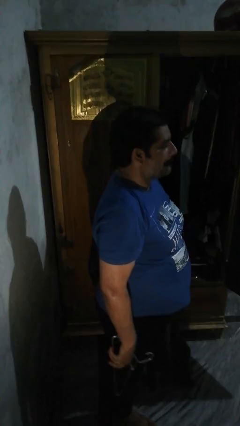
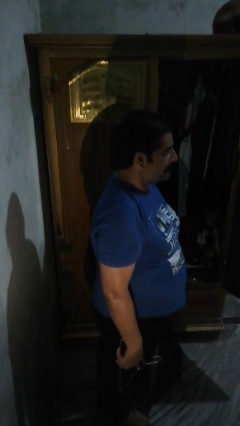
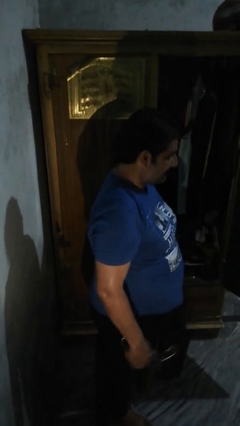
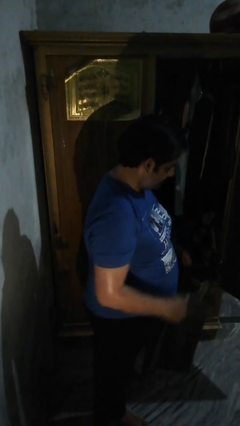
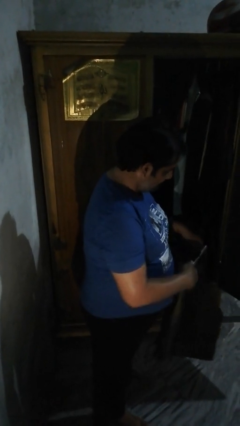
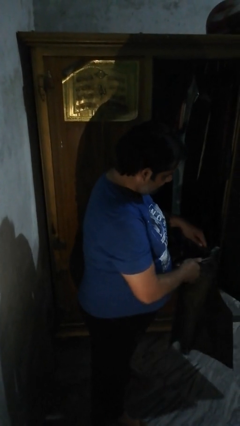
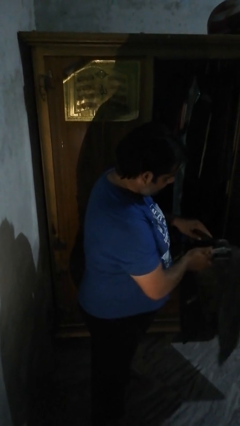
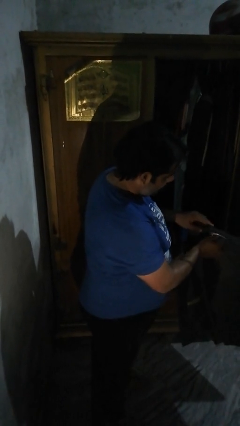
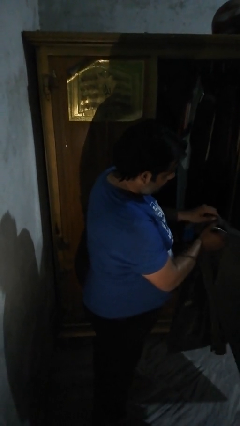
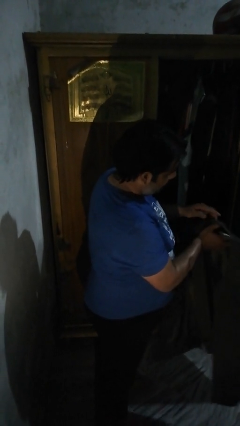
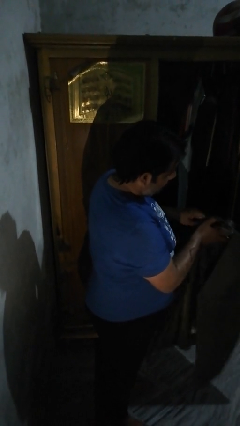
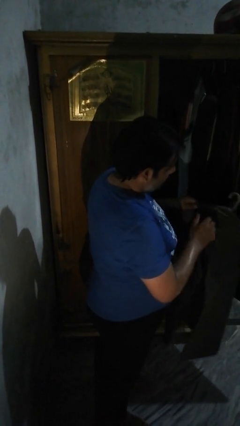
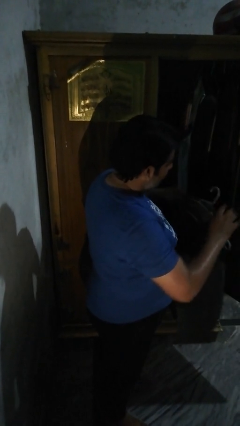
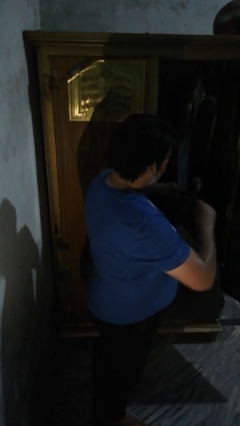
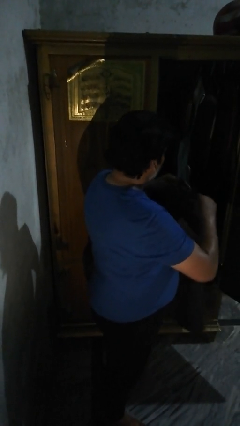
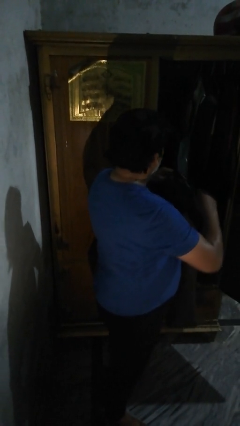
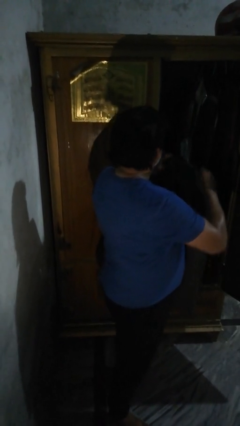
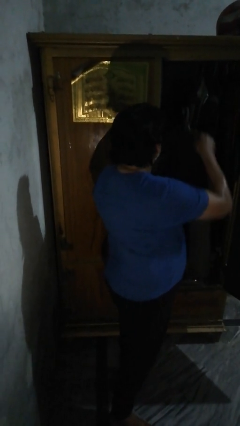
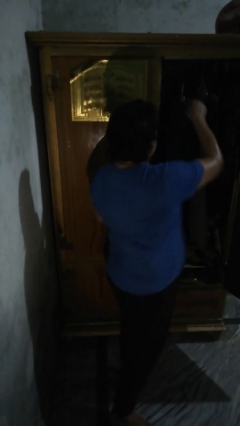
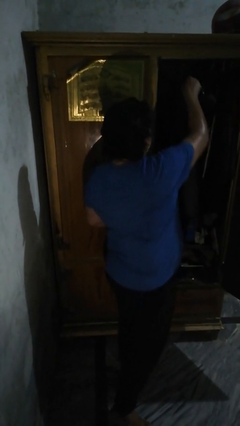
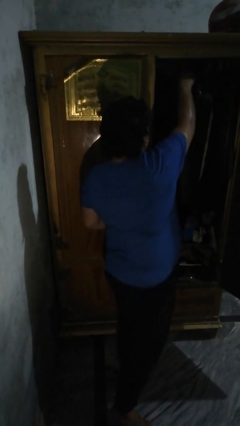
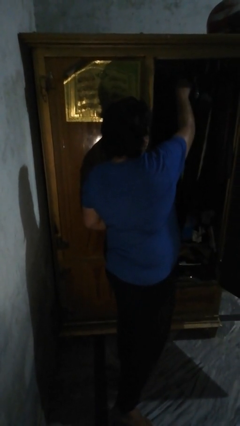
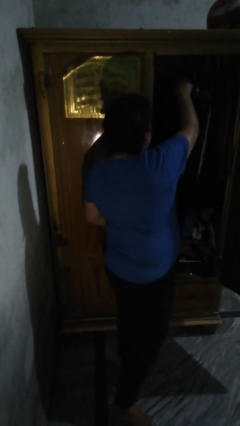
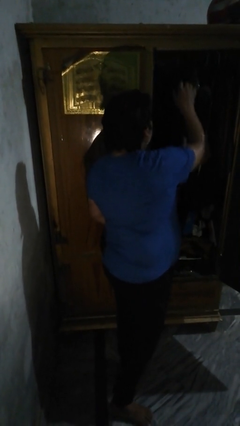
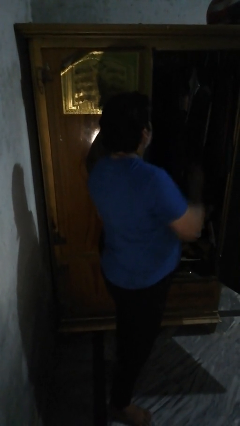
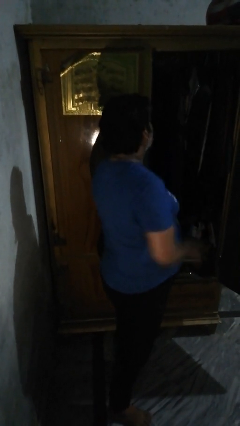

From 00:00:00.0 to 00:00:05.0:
person puts clothes into closet

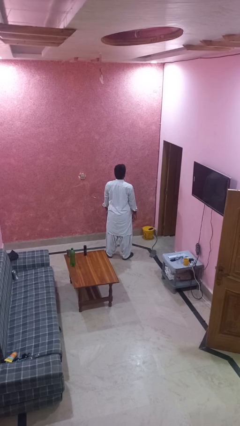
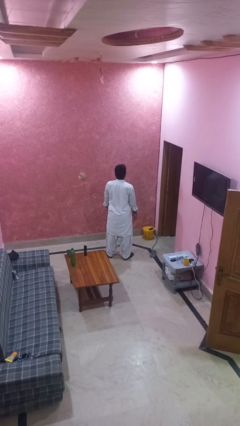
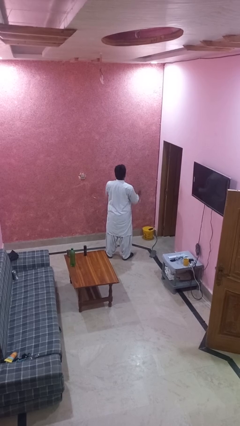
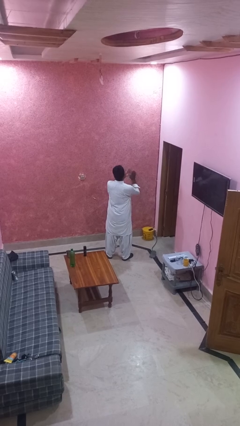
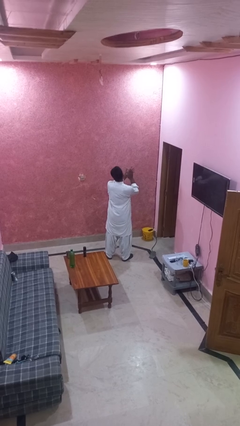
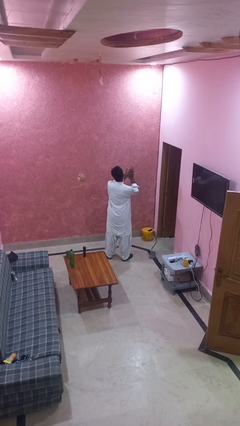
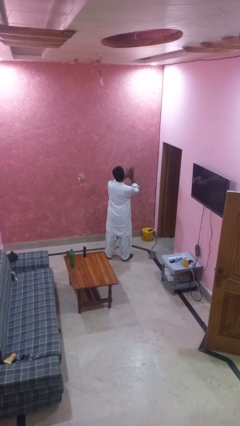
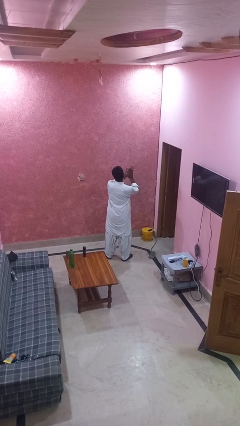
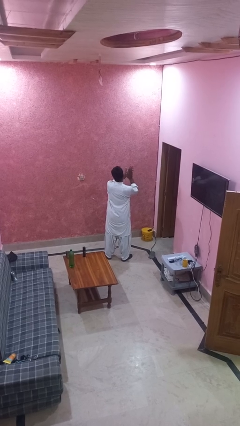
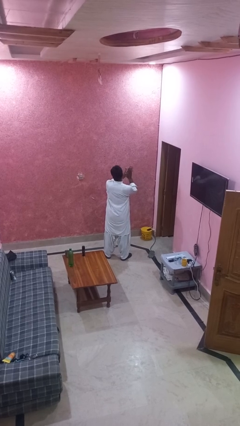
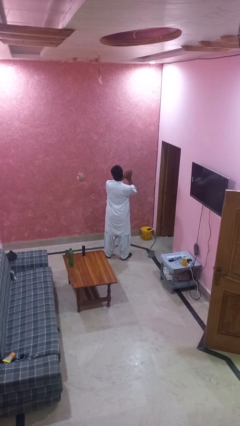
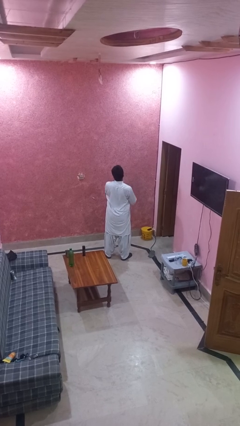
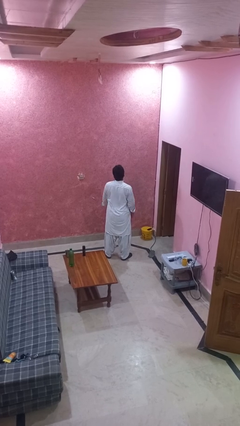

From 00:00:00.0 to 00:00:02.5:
person claps hands

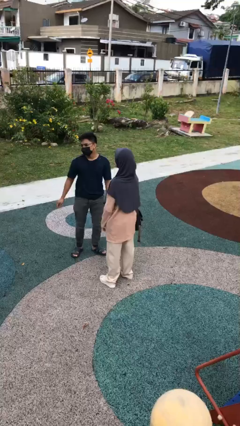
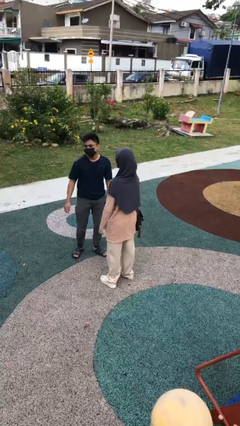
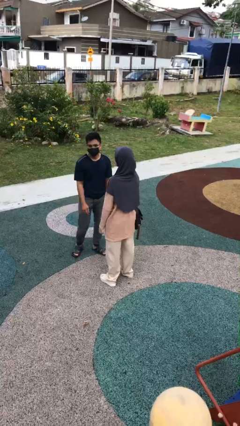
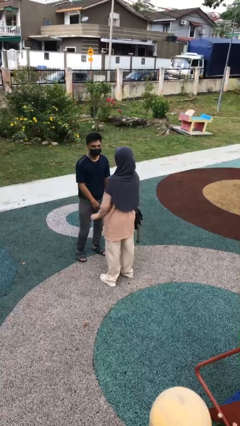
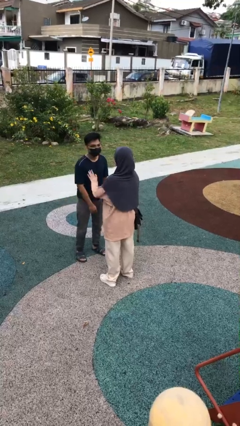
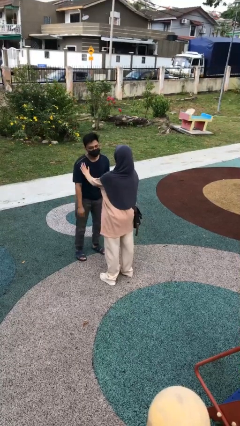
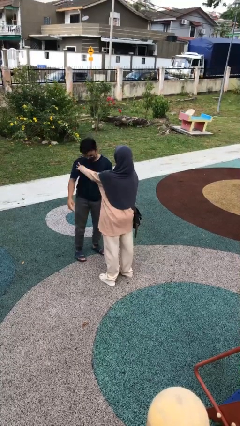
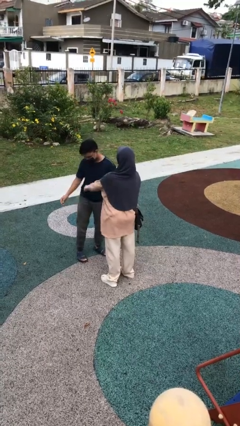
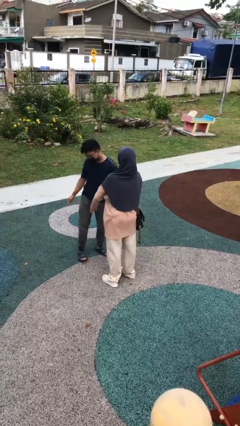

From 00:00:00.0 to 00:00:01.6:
person shoves person

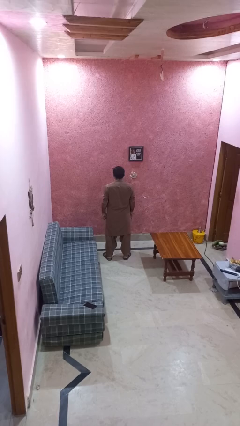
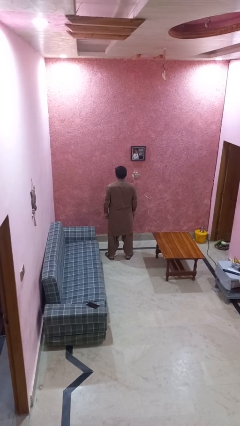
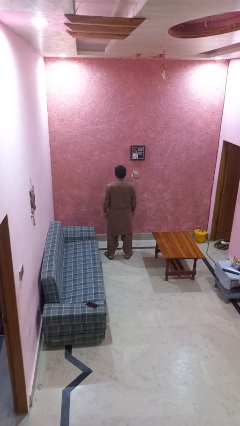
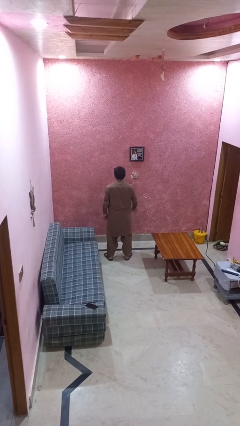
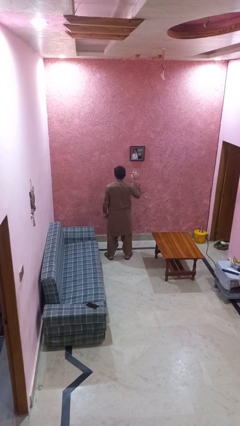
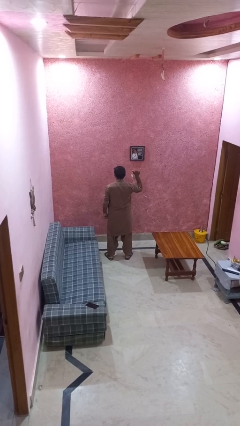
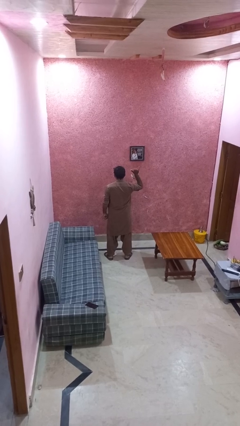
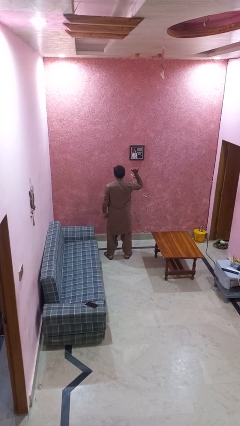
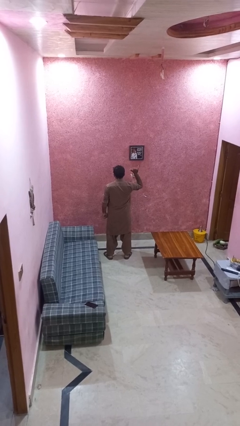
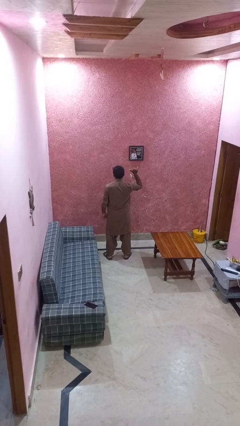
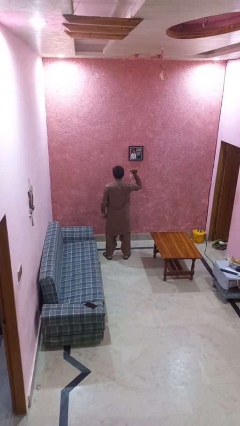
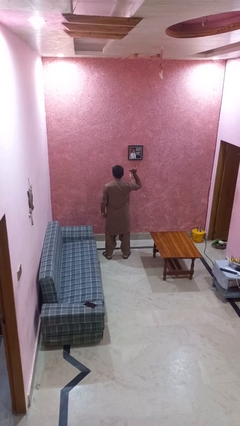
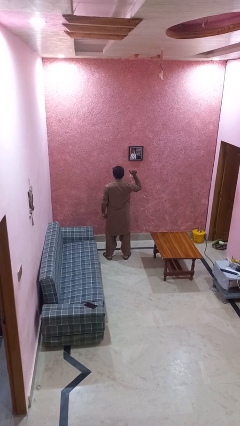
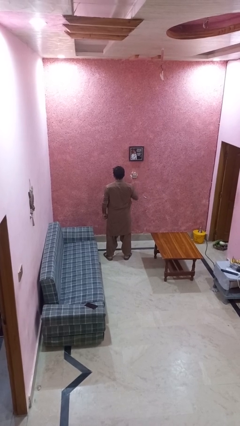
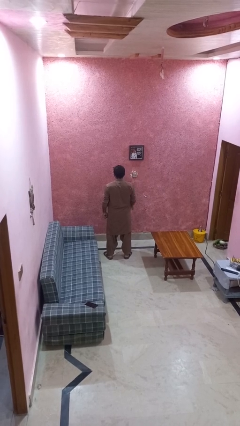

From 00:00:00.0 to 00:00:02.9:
person gestures hang loose

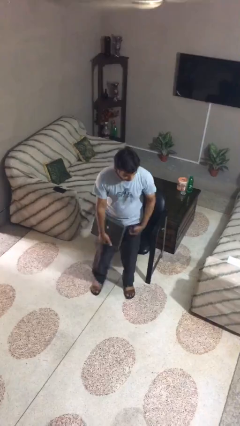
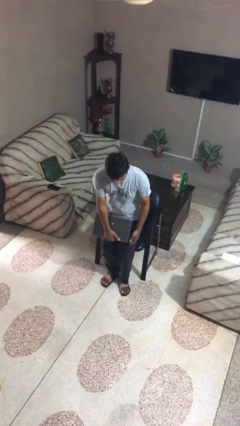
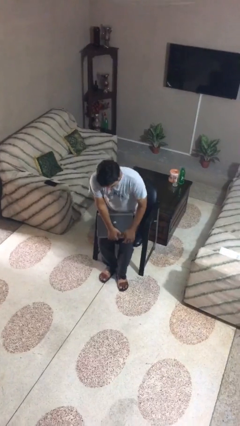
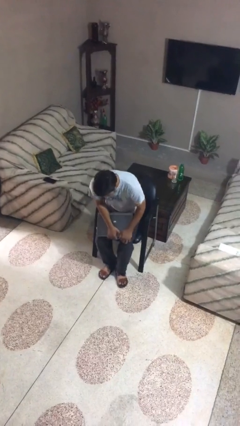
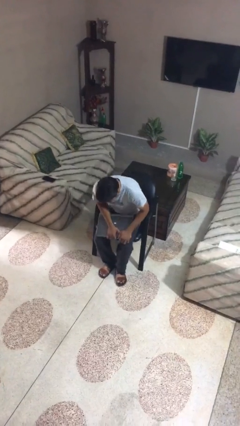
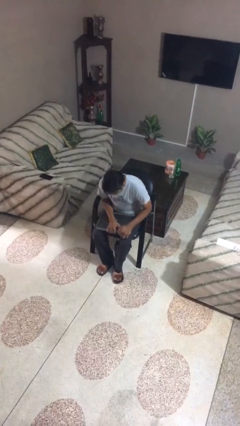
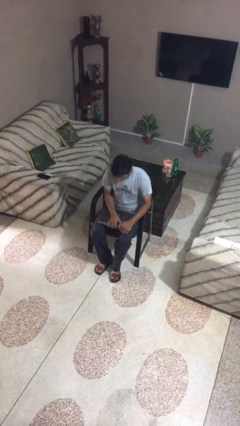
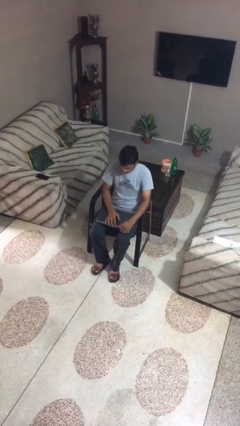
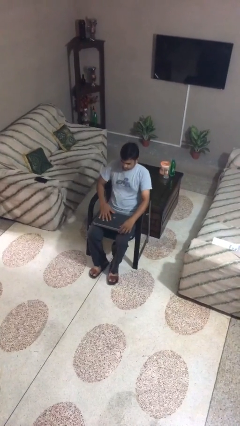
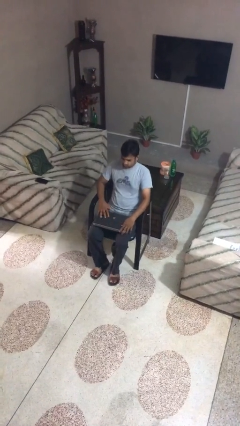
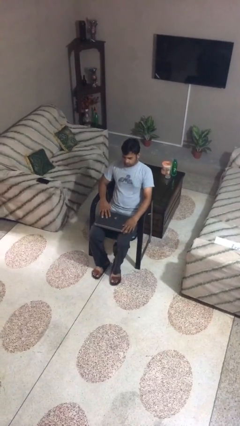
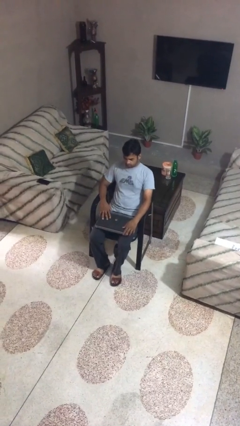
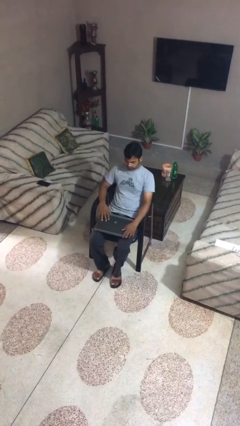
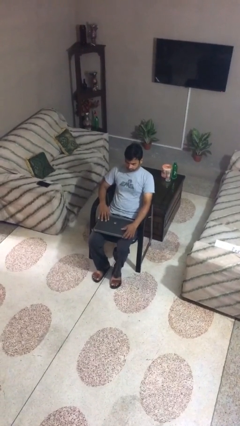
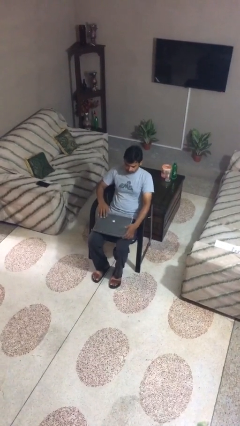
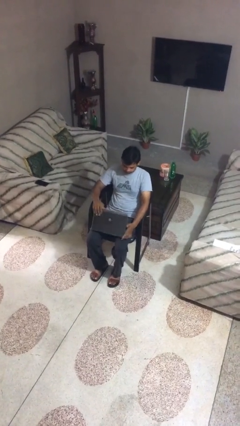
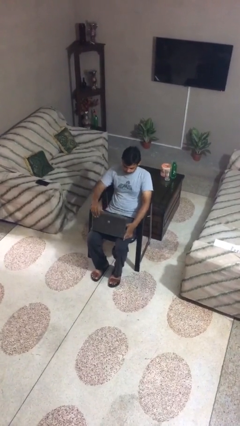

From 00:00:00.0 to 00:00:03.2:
person sits down

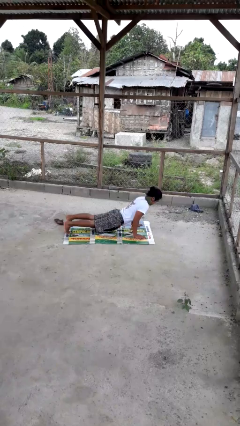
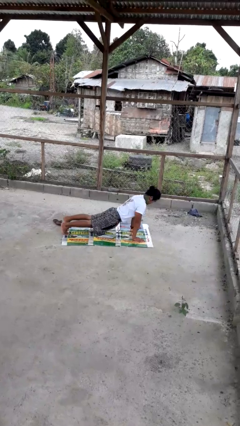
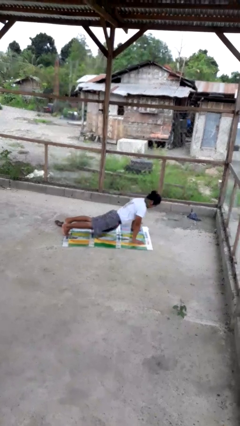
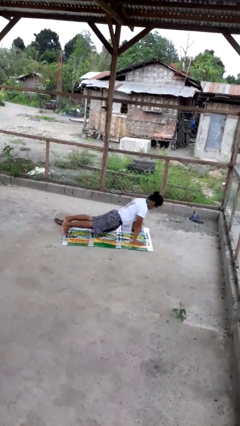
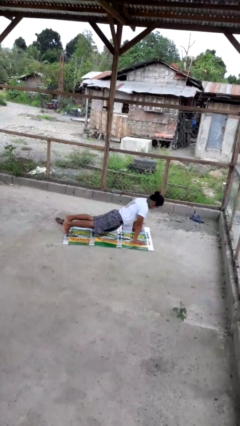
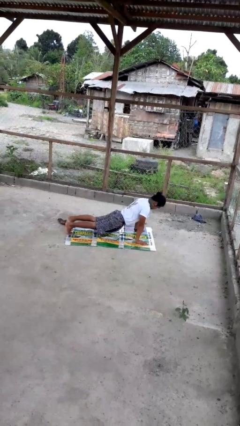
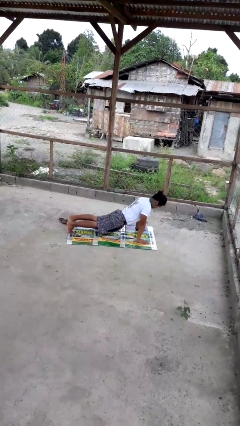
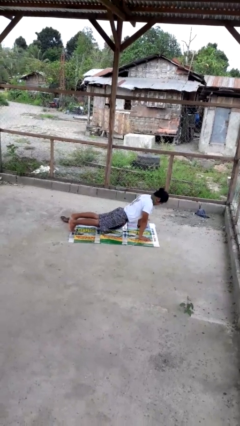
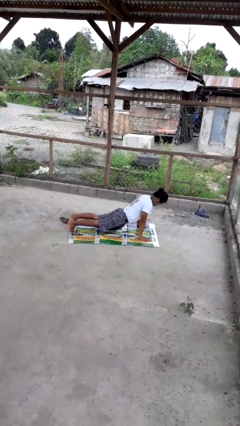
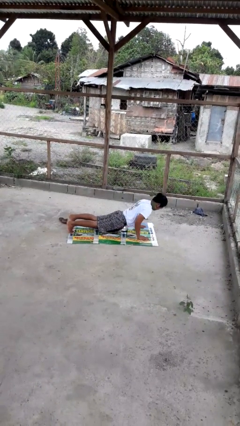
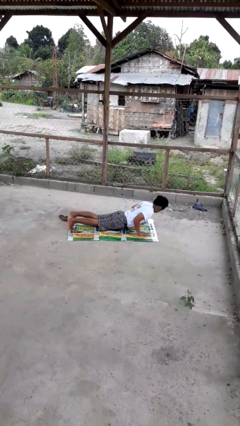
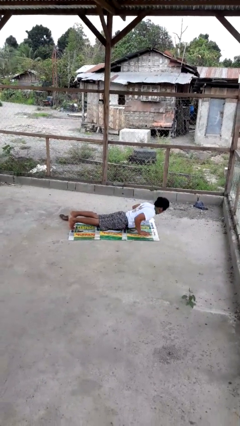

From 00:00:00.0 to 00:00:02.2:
person exercises with pushup

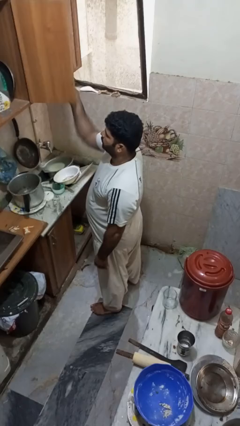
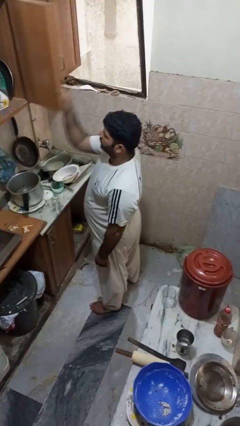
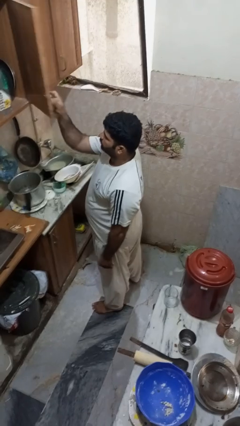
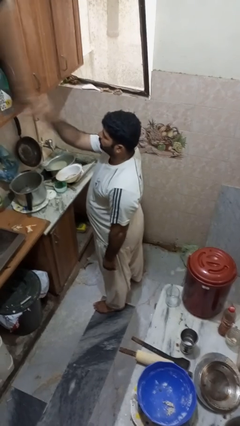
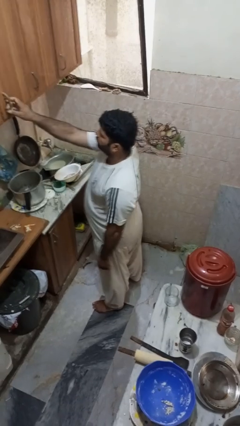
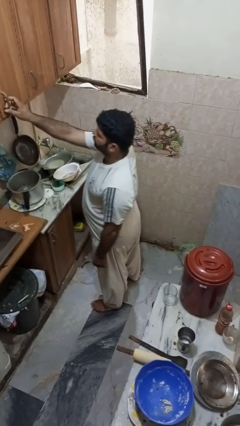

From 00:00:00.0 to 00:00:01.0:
person closes cabinet
